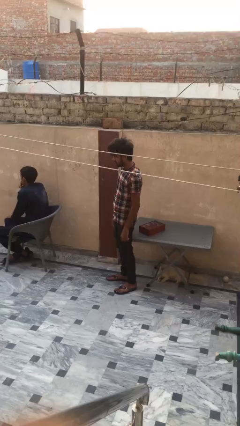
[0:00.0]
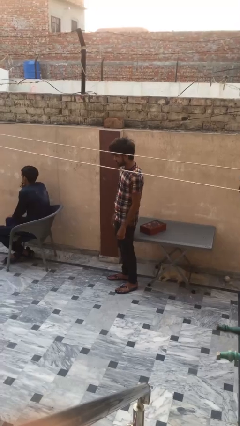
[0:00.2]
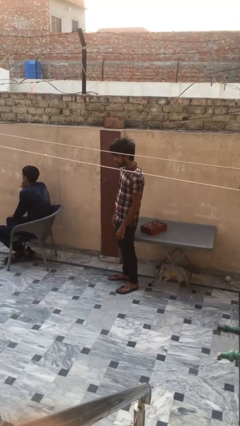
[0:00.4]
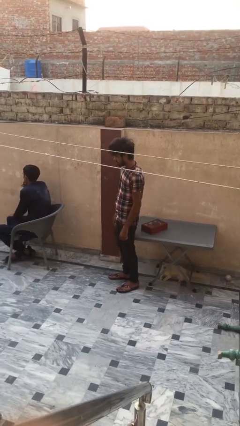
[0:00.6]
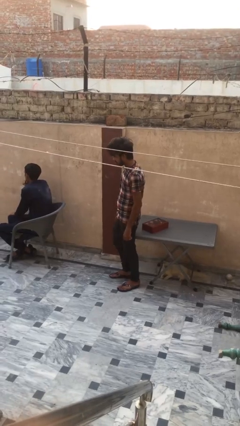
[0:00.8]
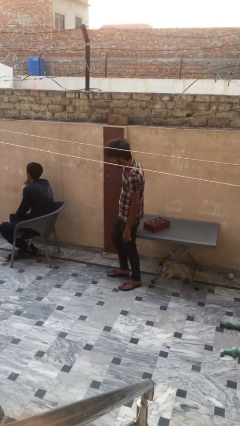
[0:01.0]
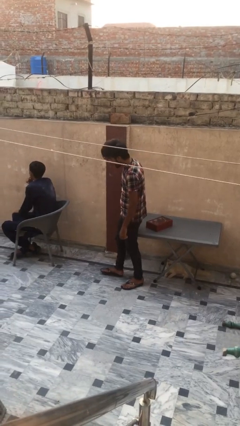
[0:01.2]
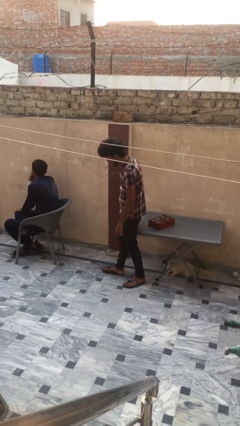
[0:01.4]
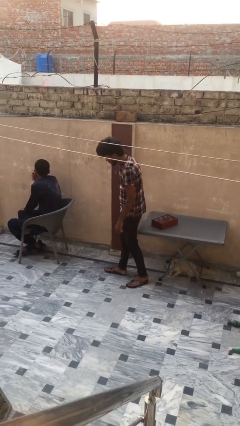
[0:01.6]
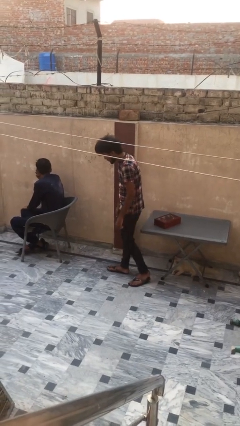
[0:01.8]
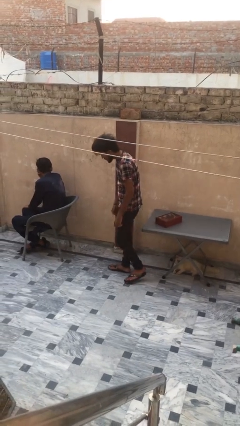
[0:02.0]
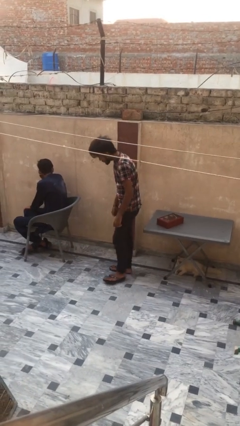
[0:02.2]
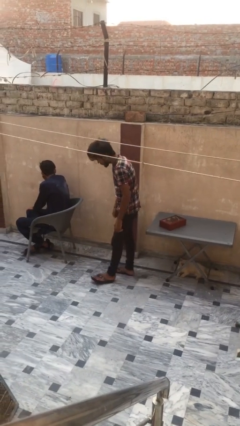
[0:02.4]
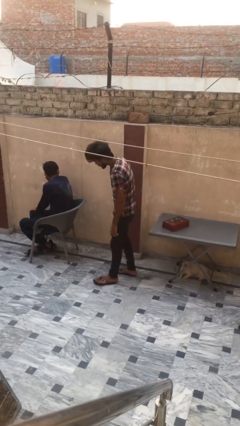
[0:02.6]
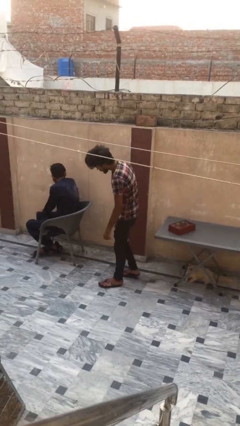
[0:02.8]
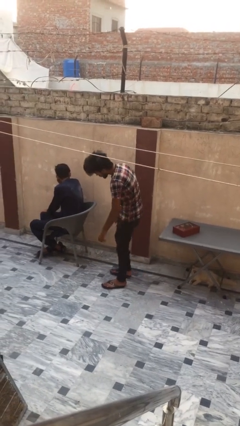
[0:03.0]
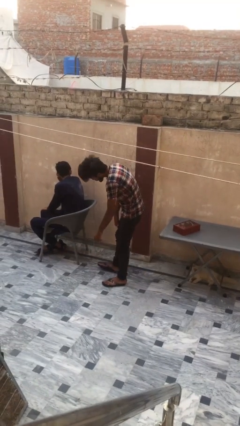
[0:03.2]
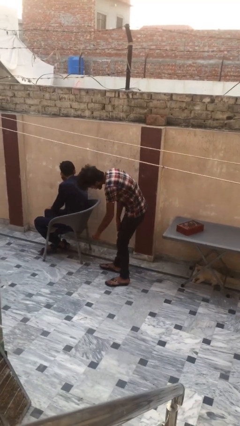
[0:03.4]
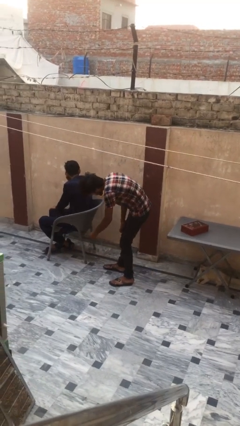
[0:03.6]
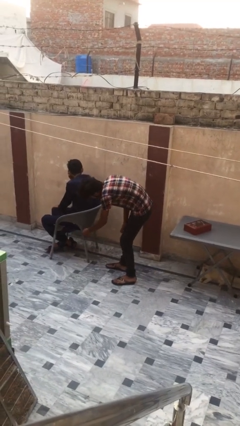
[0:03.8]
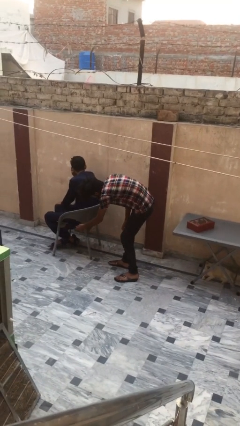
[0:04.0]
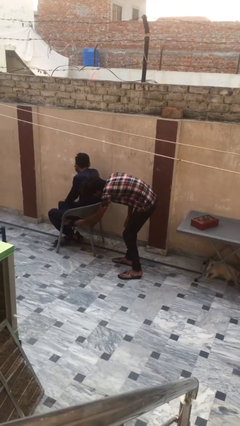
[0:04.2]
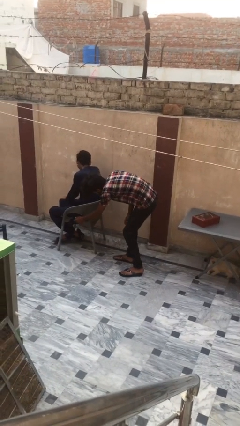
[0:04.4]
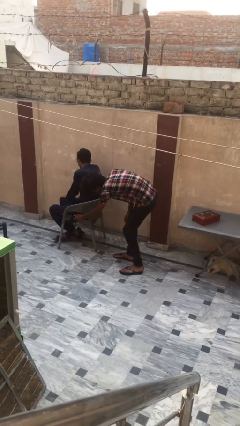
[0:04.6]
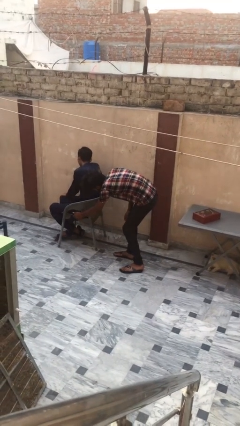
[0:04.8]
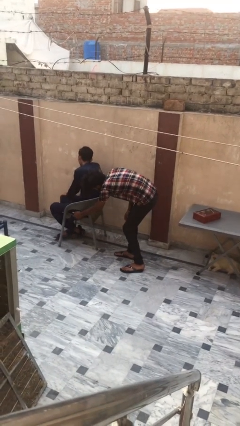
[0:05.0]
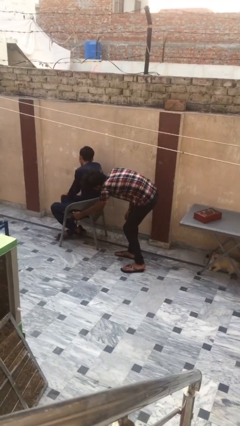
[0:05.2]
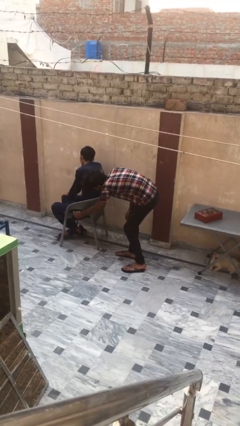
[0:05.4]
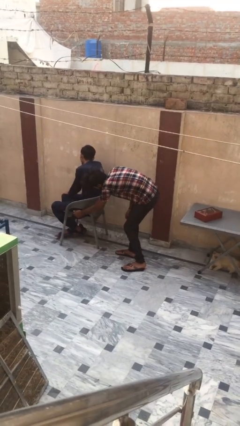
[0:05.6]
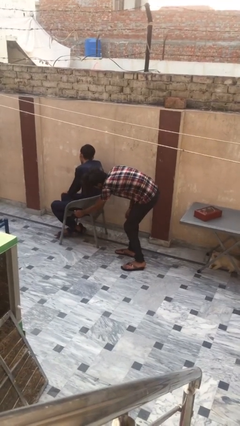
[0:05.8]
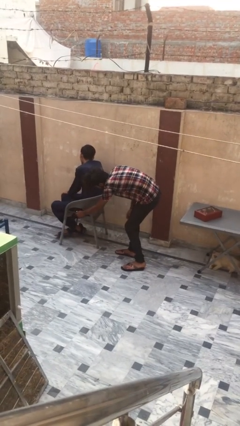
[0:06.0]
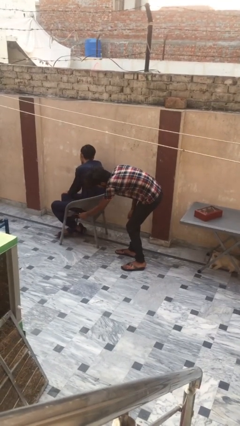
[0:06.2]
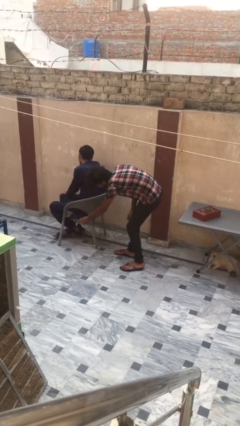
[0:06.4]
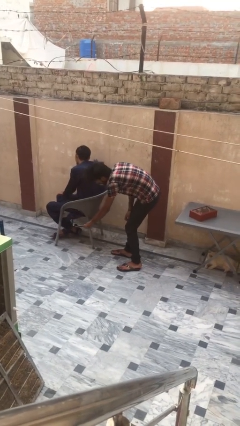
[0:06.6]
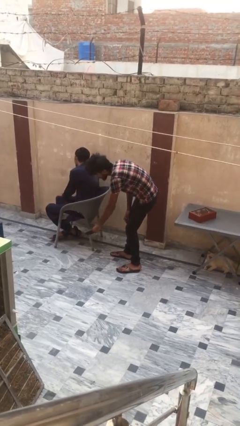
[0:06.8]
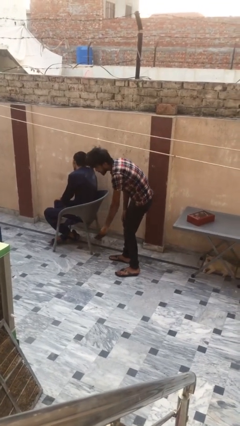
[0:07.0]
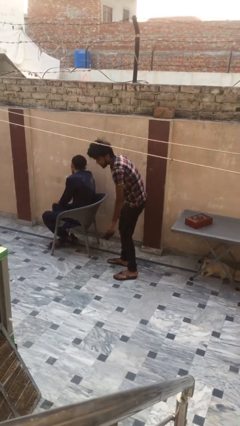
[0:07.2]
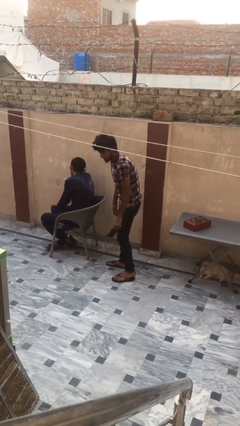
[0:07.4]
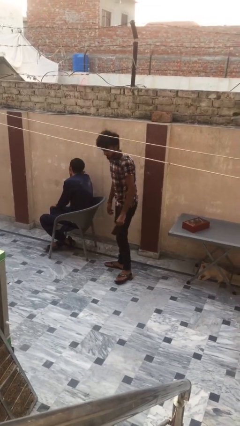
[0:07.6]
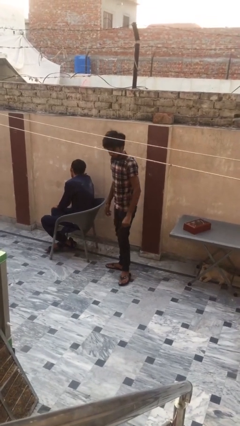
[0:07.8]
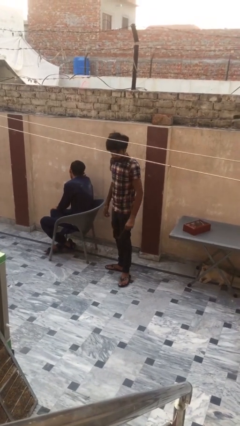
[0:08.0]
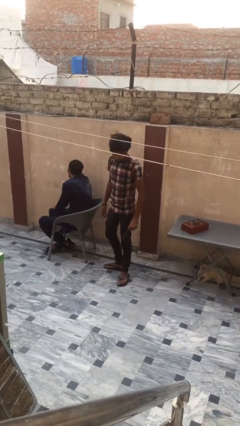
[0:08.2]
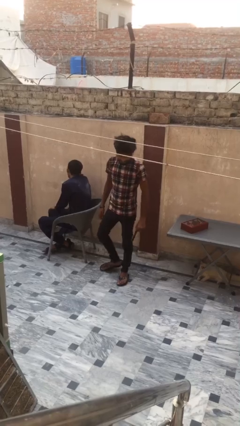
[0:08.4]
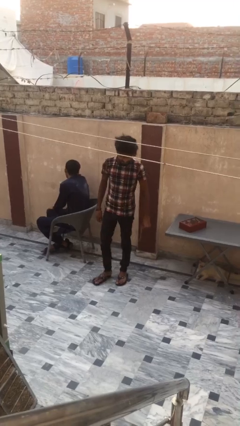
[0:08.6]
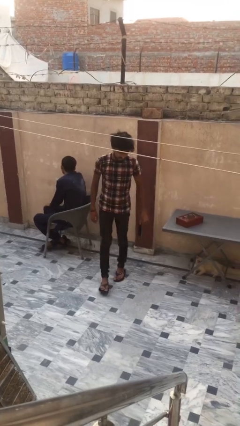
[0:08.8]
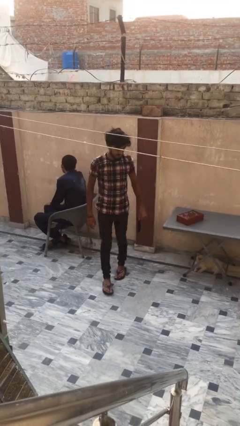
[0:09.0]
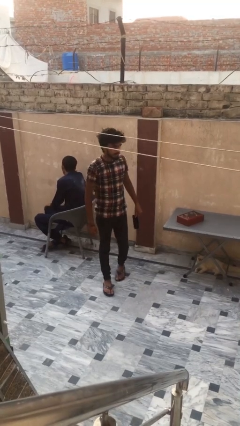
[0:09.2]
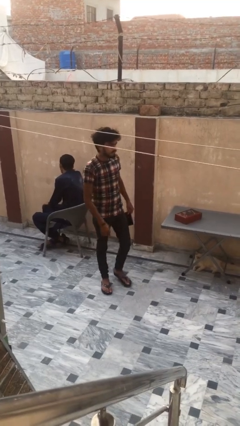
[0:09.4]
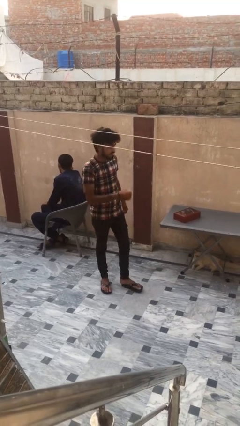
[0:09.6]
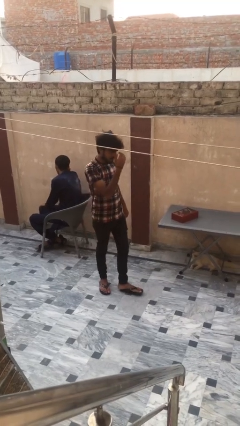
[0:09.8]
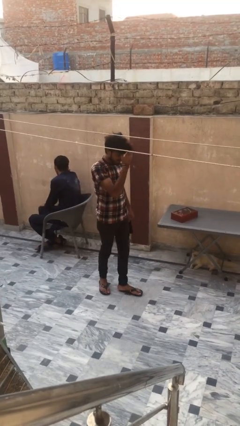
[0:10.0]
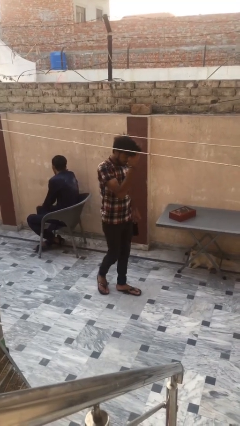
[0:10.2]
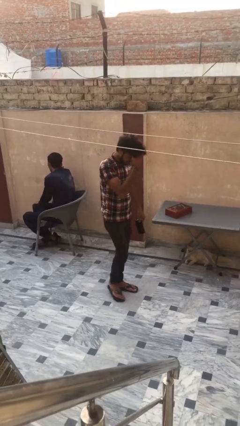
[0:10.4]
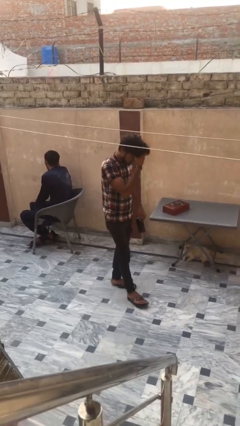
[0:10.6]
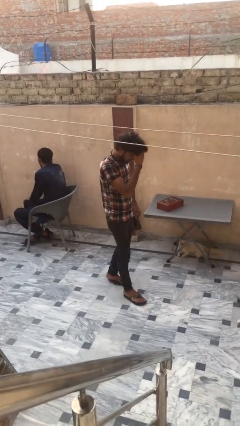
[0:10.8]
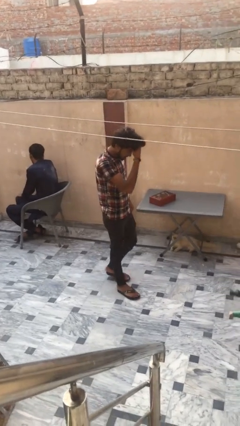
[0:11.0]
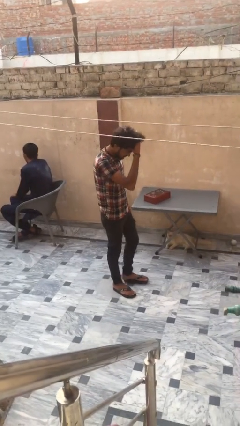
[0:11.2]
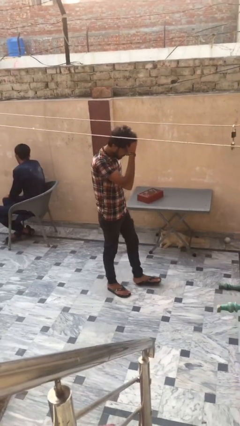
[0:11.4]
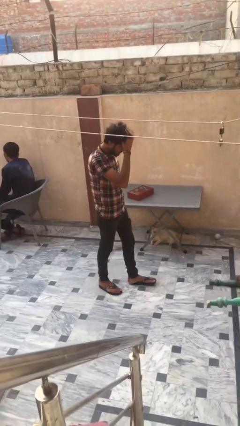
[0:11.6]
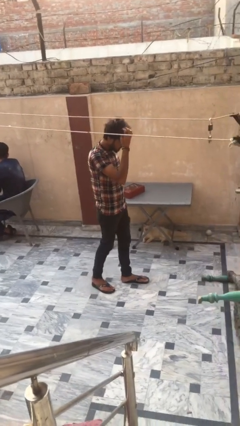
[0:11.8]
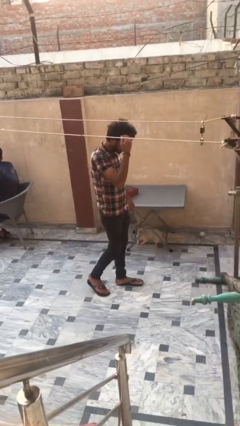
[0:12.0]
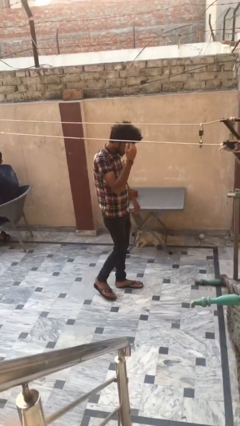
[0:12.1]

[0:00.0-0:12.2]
person steals object from person

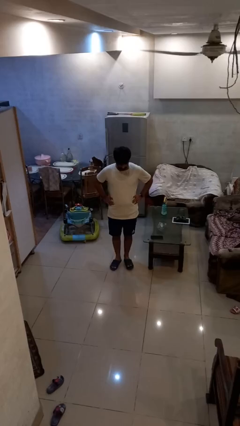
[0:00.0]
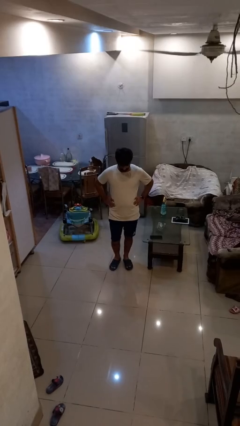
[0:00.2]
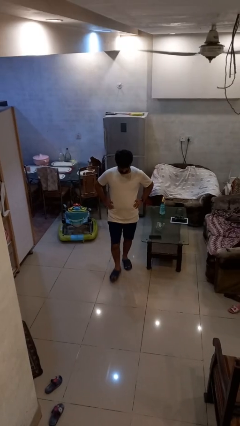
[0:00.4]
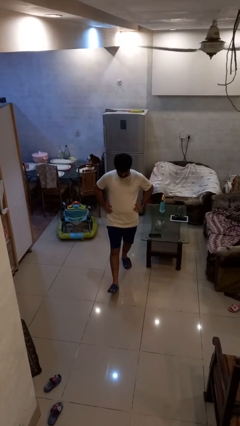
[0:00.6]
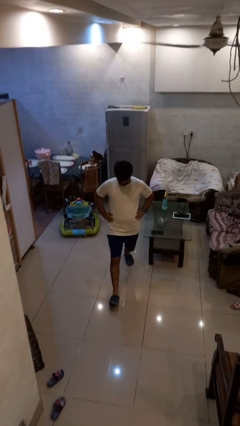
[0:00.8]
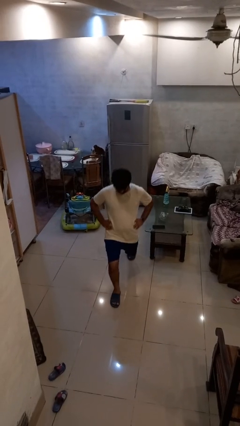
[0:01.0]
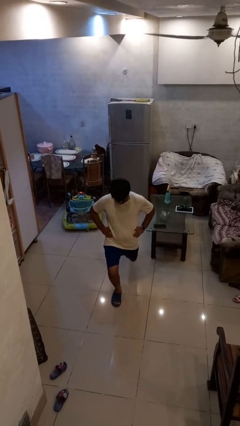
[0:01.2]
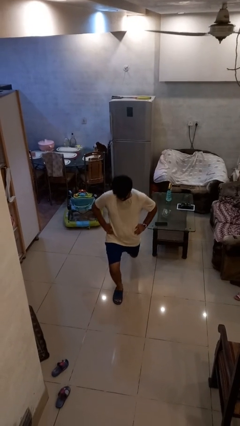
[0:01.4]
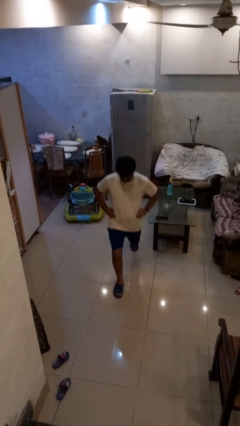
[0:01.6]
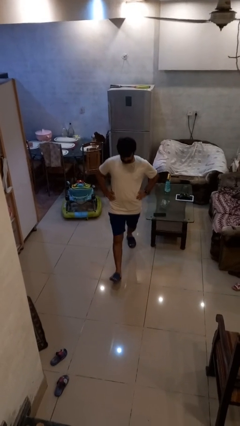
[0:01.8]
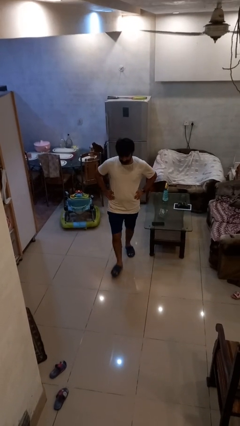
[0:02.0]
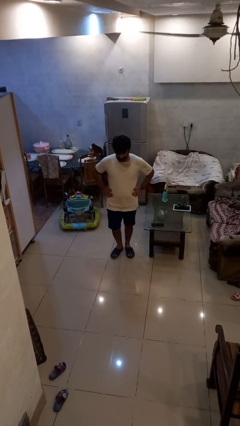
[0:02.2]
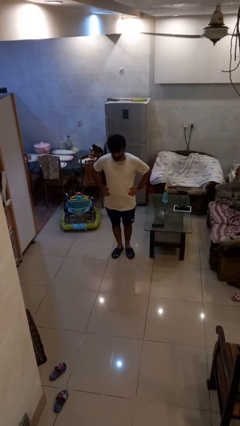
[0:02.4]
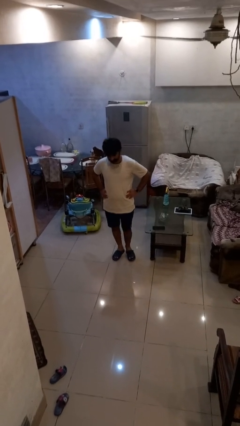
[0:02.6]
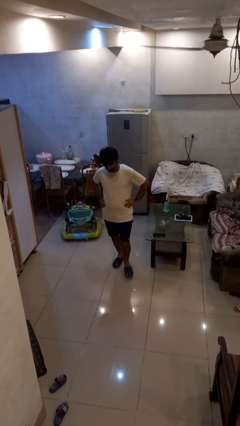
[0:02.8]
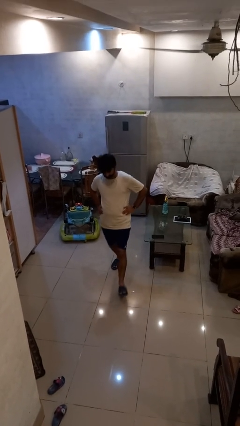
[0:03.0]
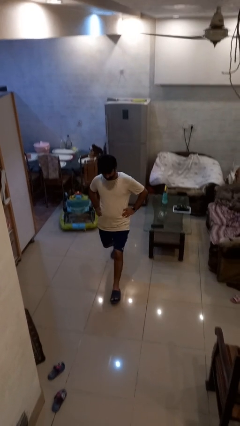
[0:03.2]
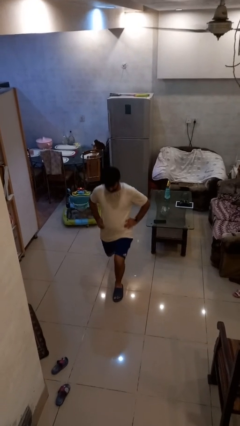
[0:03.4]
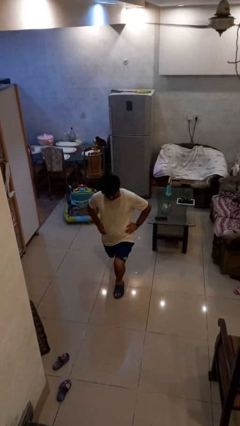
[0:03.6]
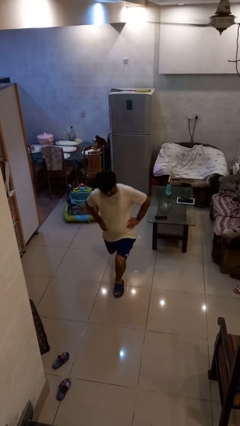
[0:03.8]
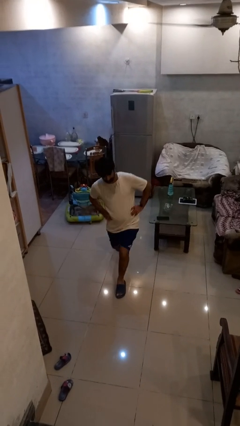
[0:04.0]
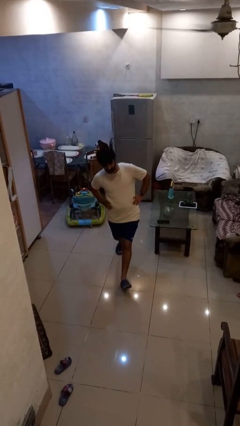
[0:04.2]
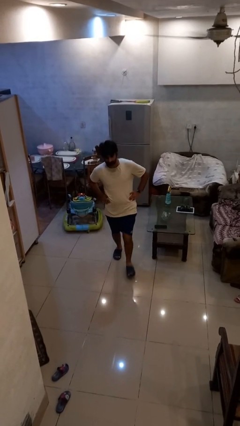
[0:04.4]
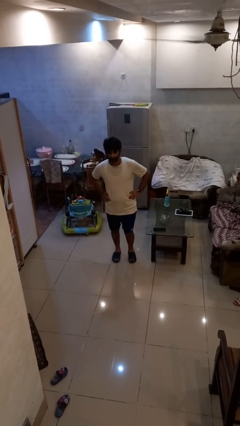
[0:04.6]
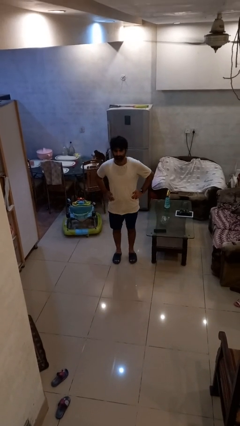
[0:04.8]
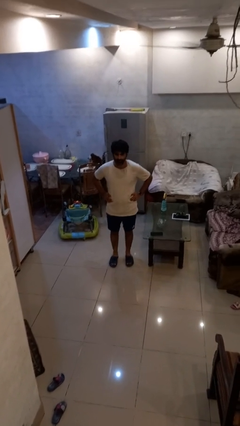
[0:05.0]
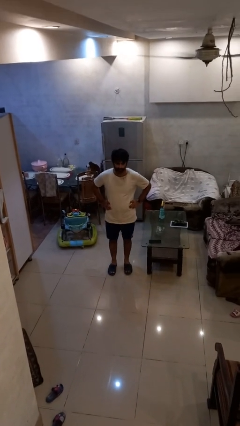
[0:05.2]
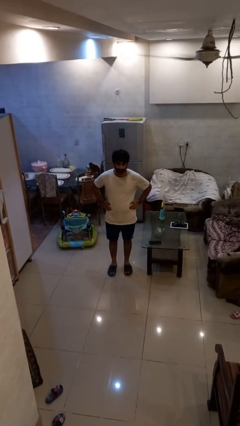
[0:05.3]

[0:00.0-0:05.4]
person exercises with lunges

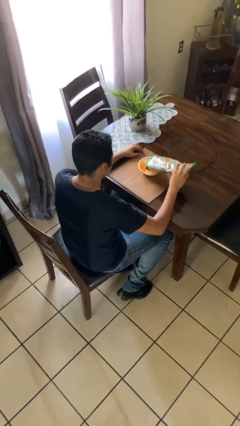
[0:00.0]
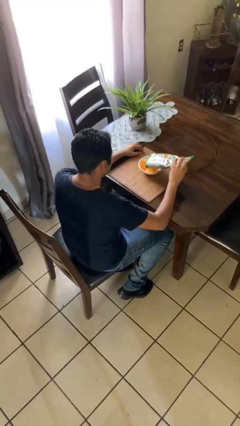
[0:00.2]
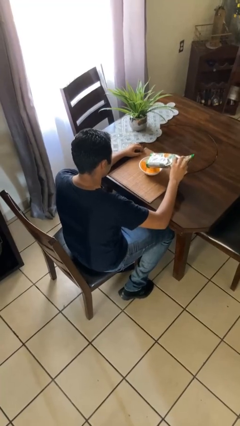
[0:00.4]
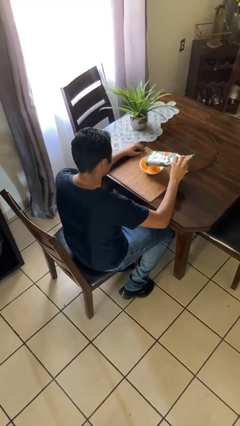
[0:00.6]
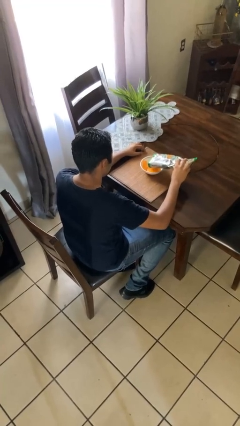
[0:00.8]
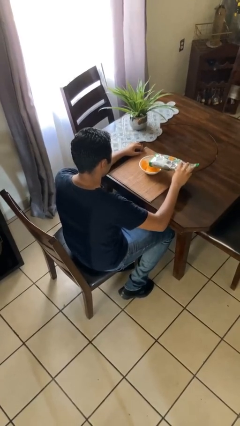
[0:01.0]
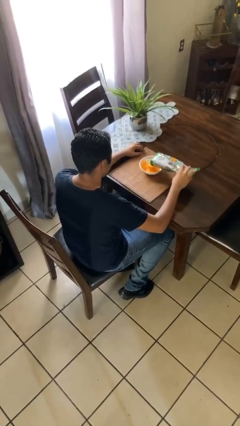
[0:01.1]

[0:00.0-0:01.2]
person pours into bowl
